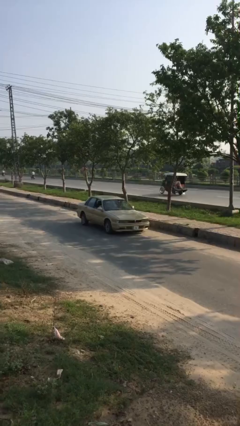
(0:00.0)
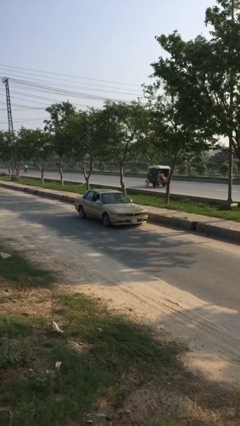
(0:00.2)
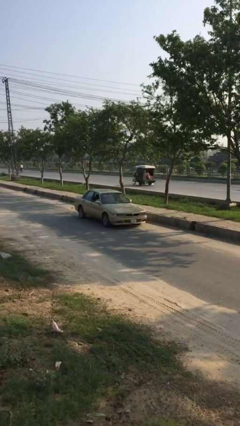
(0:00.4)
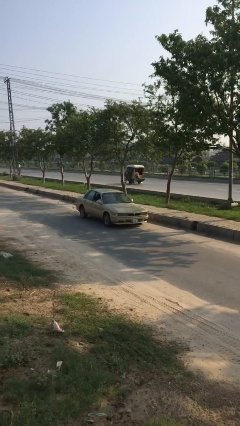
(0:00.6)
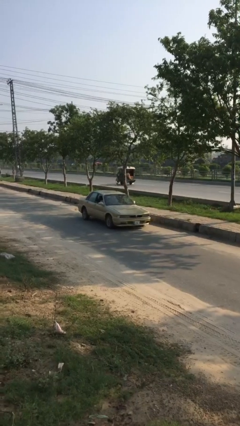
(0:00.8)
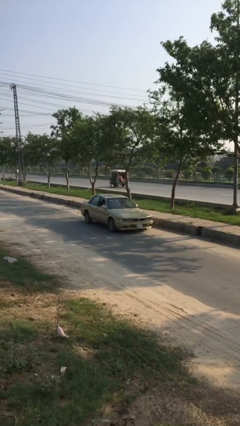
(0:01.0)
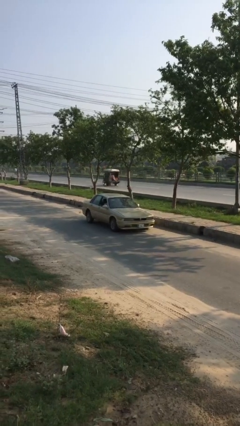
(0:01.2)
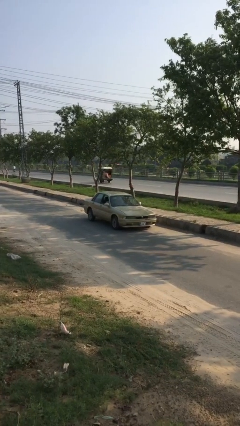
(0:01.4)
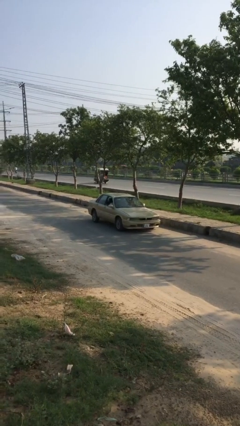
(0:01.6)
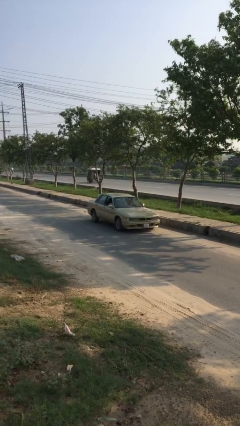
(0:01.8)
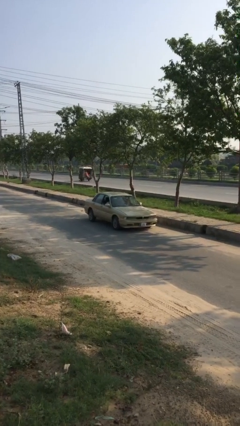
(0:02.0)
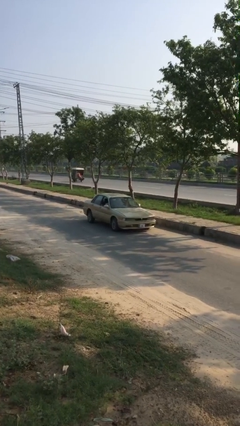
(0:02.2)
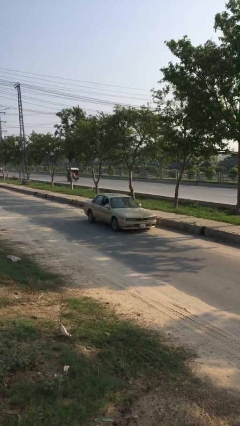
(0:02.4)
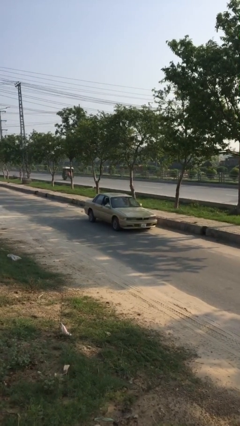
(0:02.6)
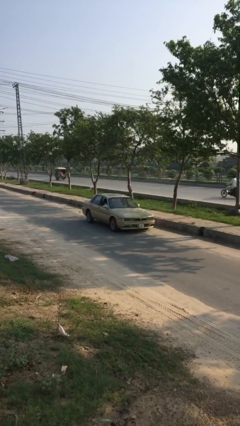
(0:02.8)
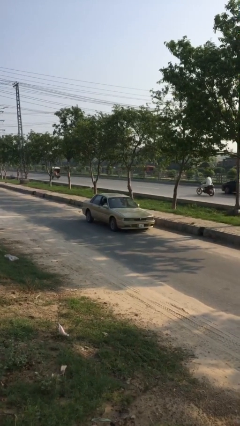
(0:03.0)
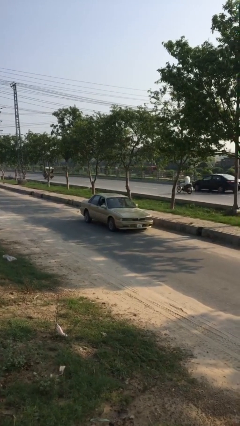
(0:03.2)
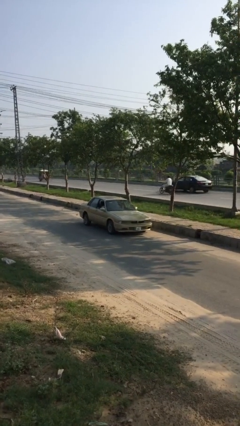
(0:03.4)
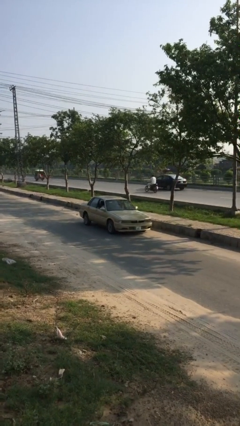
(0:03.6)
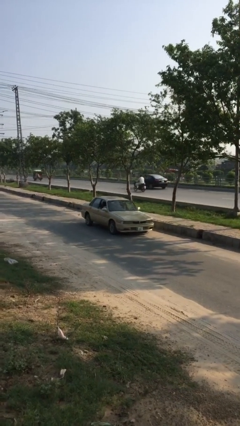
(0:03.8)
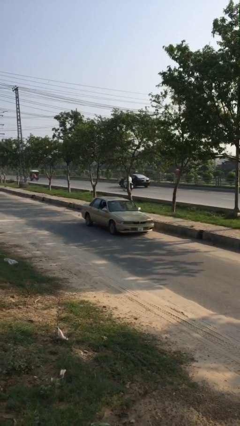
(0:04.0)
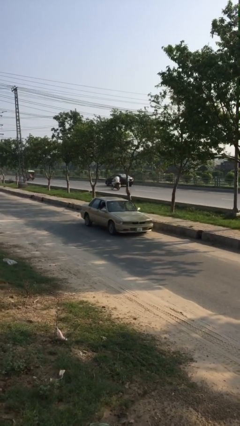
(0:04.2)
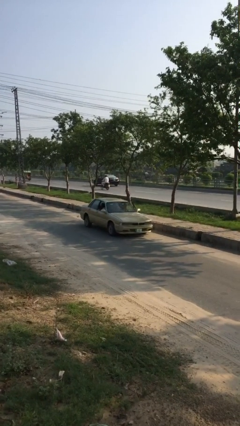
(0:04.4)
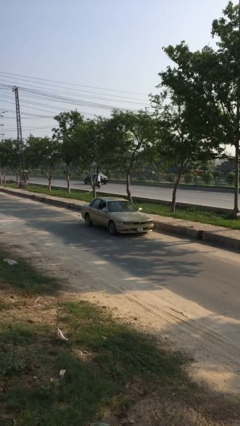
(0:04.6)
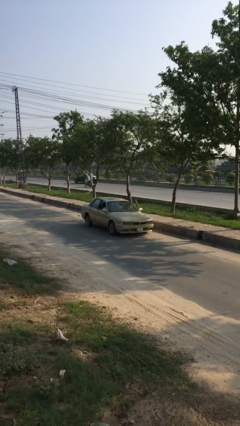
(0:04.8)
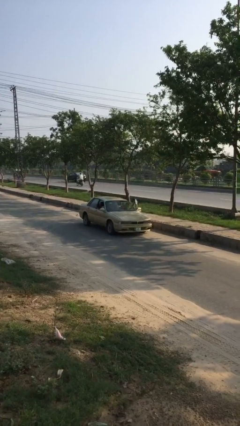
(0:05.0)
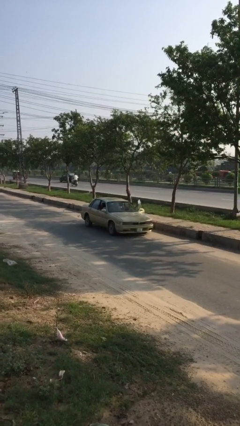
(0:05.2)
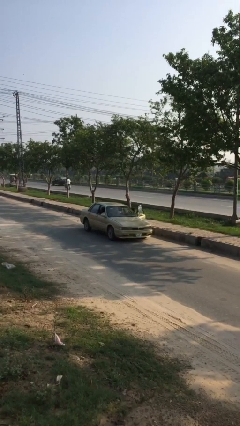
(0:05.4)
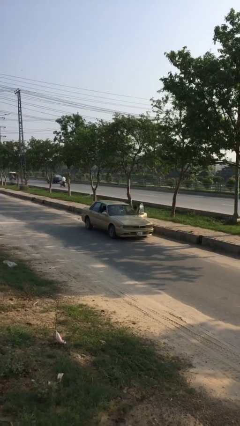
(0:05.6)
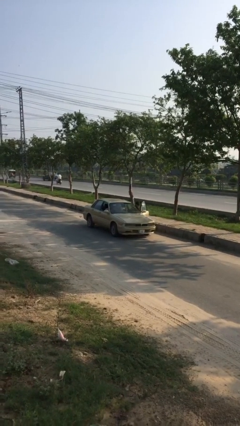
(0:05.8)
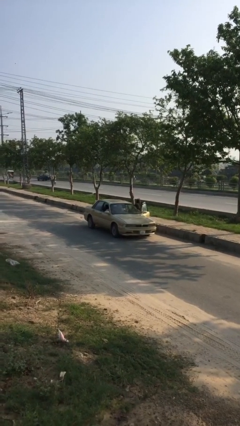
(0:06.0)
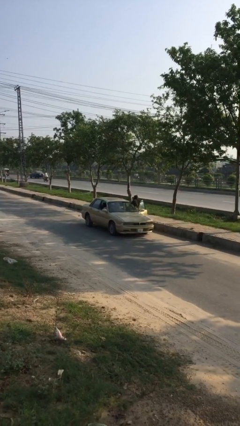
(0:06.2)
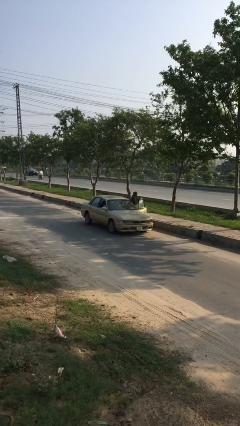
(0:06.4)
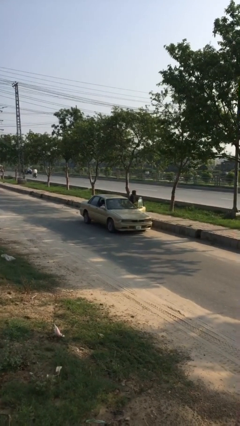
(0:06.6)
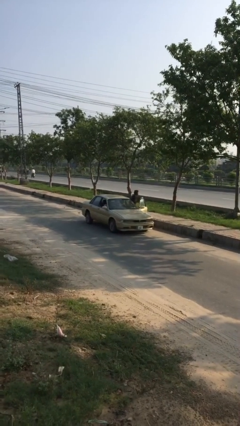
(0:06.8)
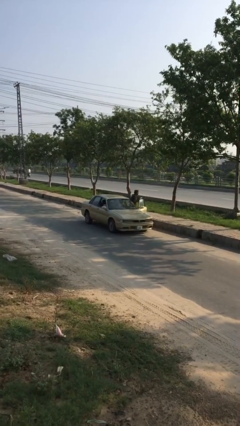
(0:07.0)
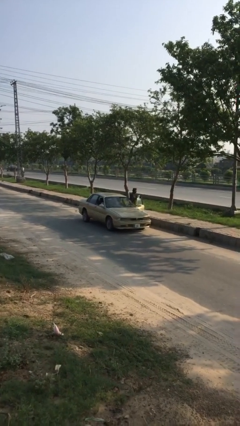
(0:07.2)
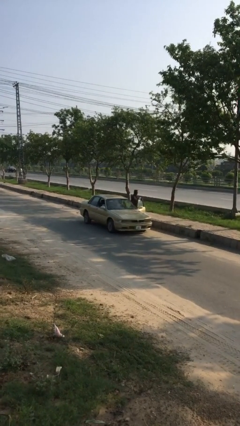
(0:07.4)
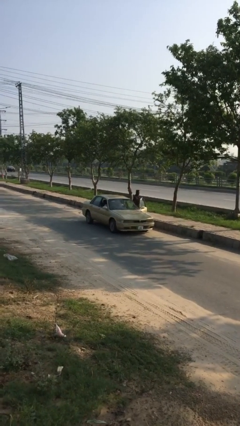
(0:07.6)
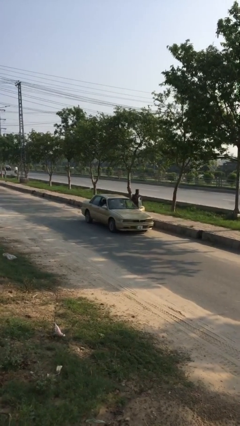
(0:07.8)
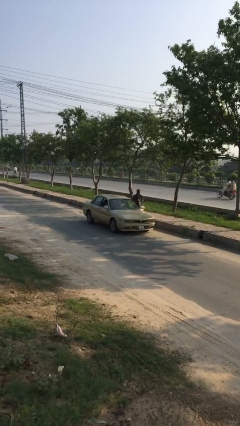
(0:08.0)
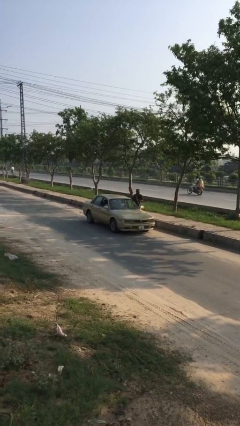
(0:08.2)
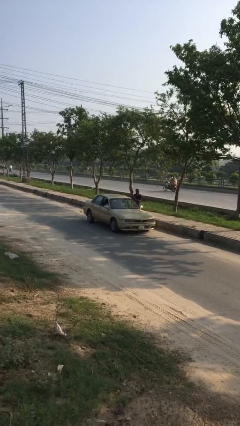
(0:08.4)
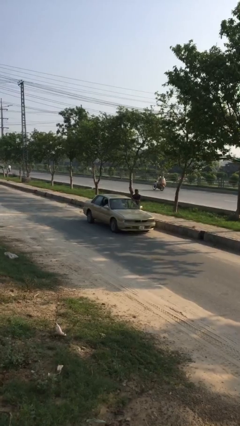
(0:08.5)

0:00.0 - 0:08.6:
car drops off person

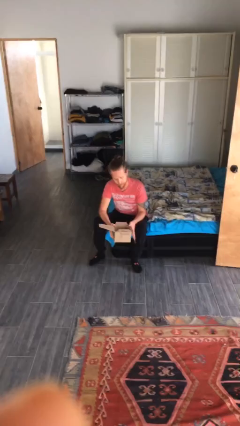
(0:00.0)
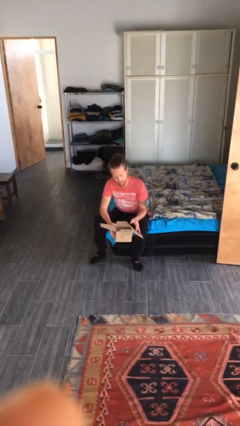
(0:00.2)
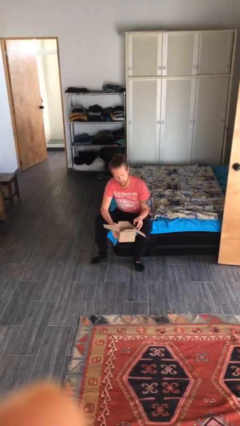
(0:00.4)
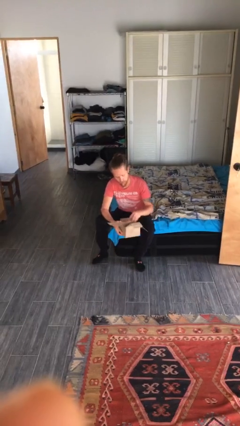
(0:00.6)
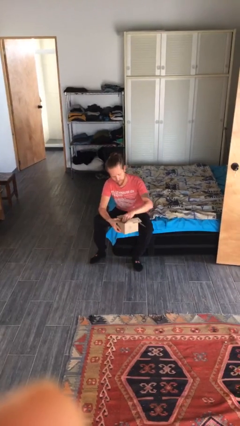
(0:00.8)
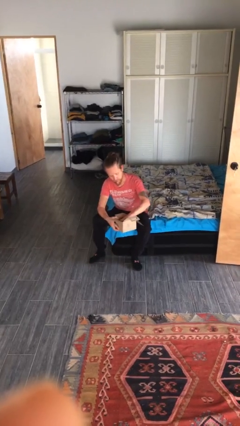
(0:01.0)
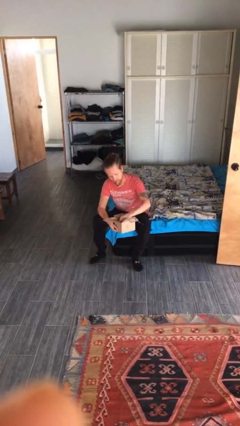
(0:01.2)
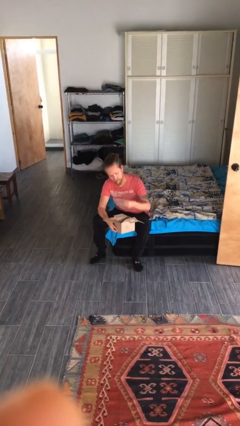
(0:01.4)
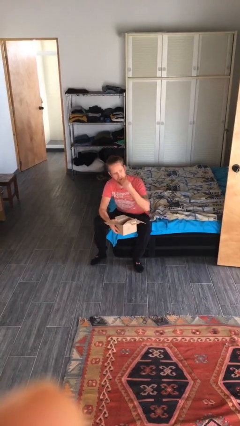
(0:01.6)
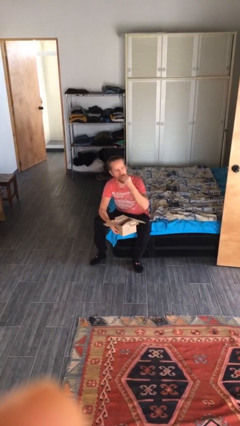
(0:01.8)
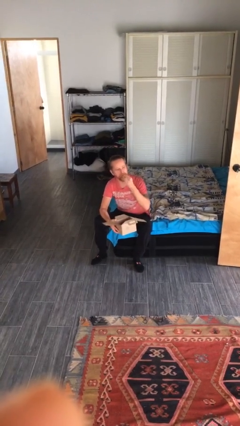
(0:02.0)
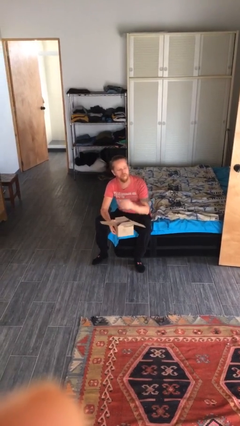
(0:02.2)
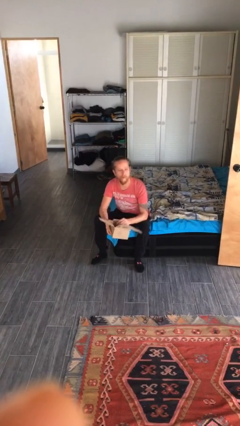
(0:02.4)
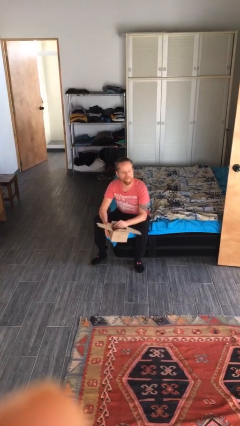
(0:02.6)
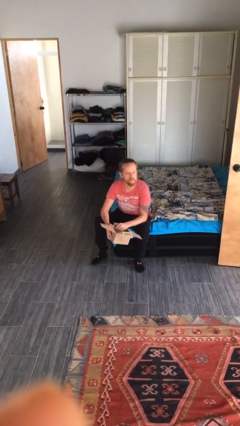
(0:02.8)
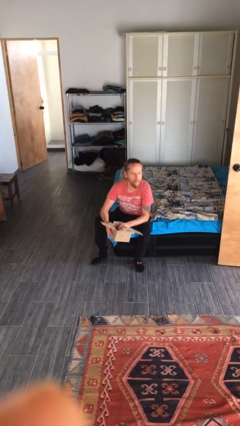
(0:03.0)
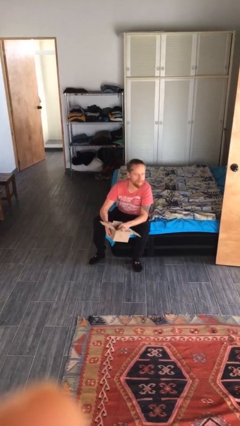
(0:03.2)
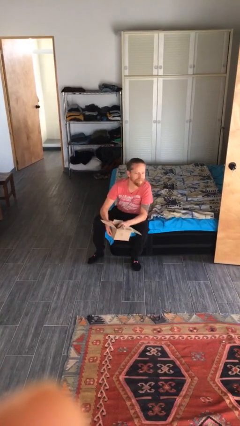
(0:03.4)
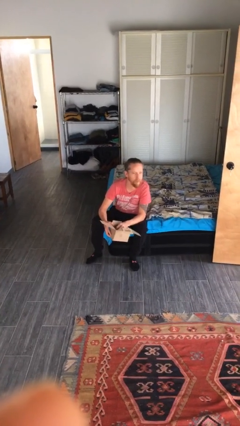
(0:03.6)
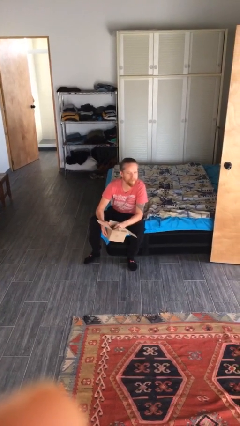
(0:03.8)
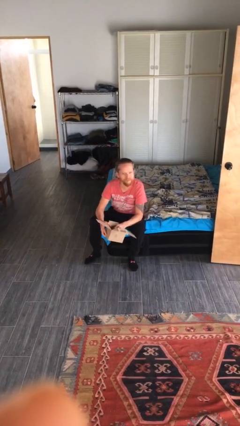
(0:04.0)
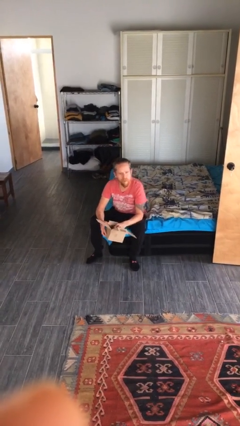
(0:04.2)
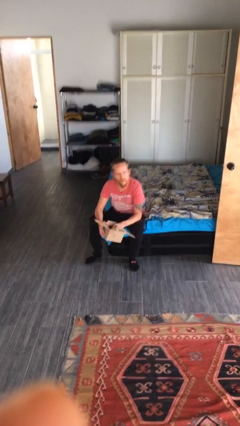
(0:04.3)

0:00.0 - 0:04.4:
person eats snack from bag

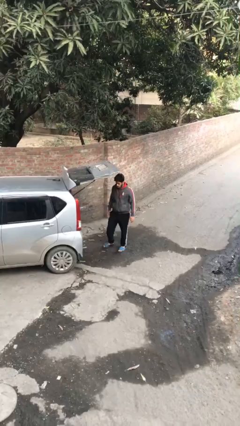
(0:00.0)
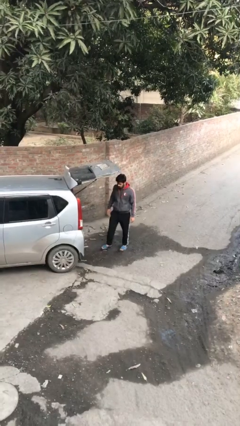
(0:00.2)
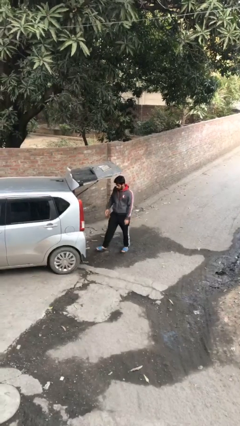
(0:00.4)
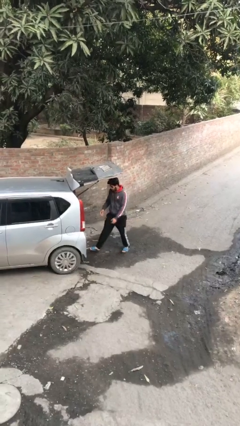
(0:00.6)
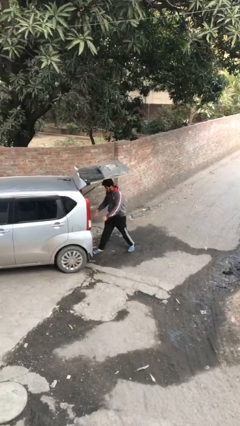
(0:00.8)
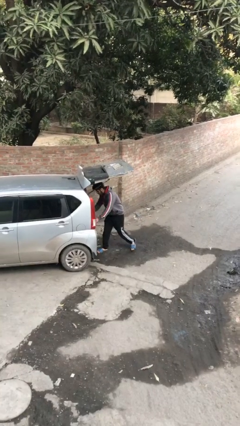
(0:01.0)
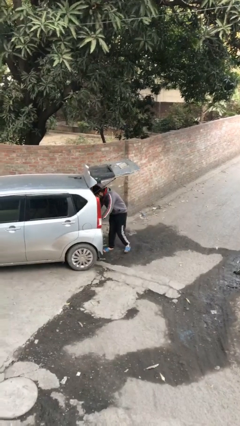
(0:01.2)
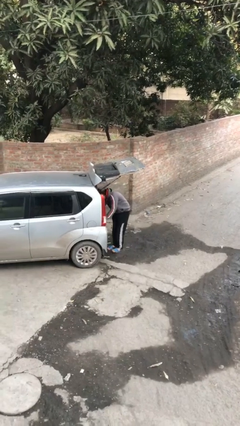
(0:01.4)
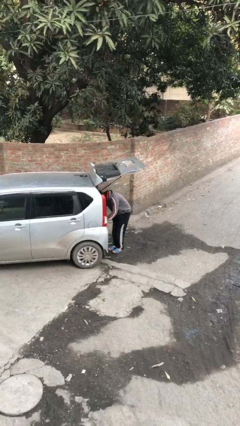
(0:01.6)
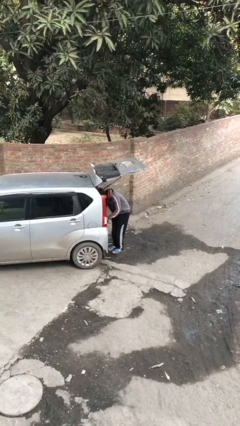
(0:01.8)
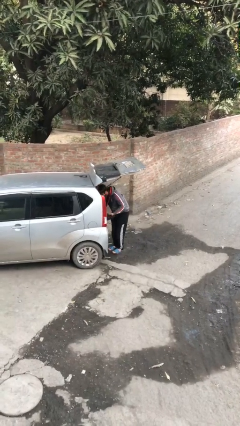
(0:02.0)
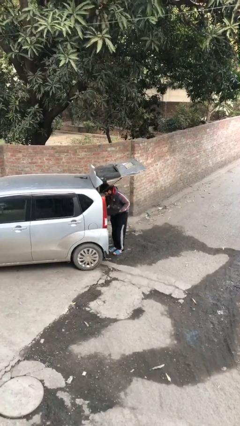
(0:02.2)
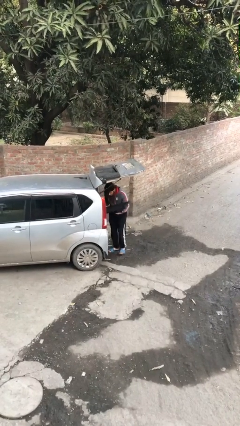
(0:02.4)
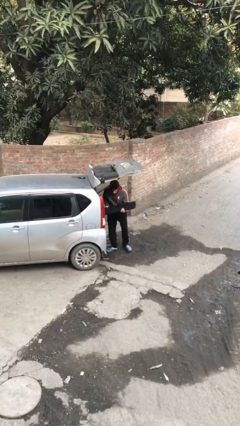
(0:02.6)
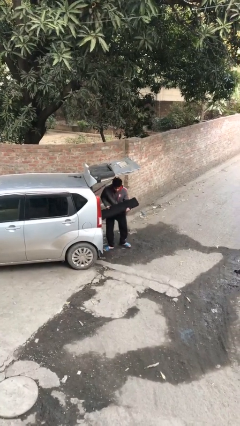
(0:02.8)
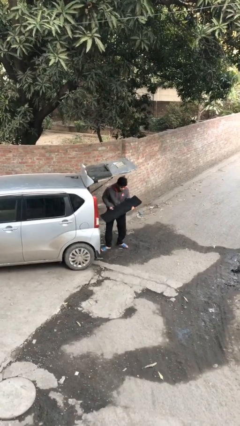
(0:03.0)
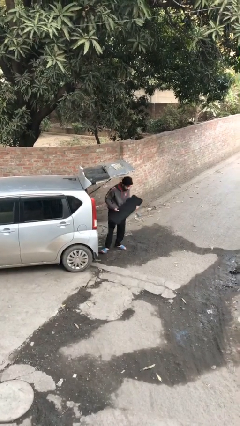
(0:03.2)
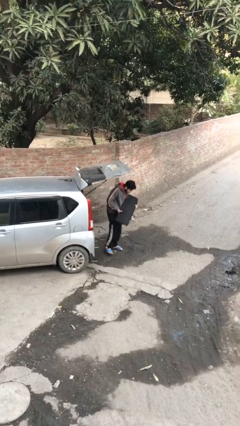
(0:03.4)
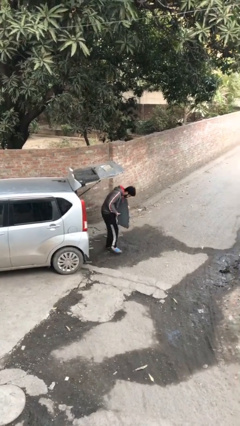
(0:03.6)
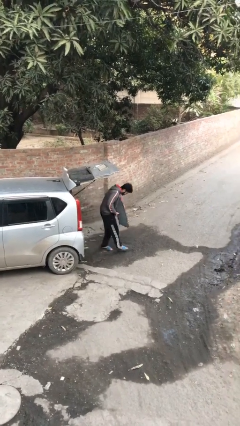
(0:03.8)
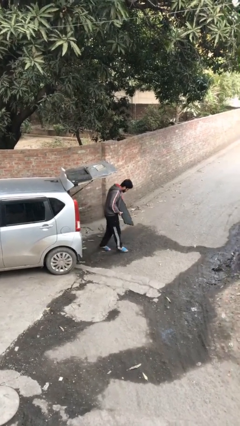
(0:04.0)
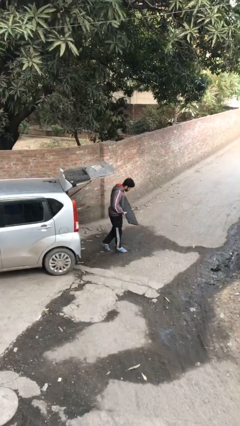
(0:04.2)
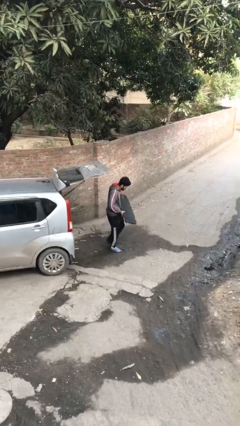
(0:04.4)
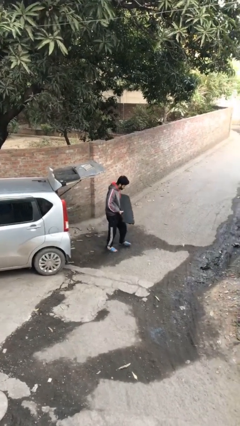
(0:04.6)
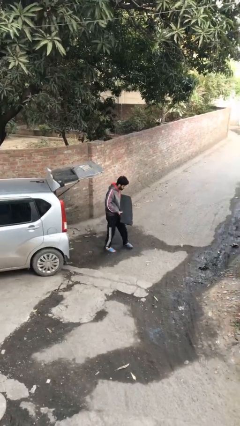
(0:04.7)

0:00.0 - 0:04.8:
person unloads car
